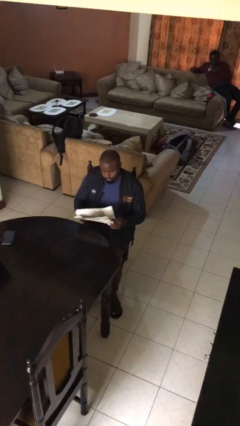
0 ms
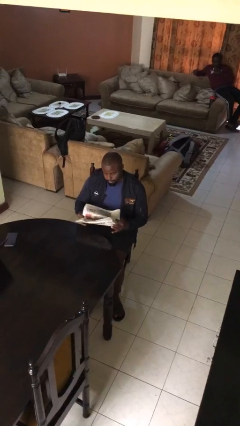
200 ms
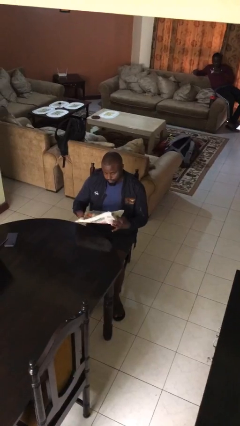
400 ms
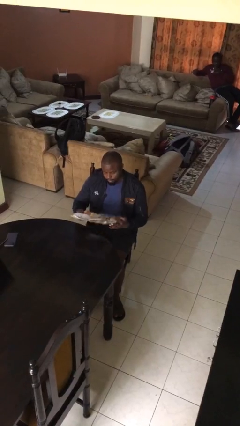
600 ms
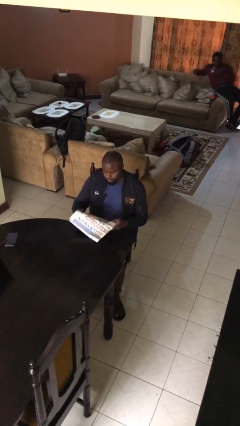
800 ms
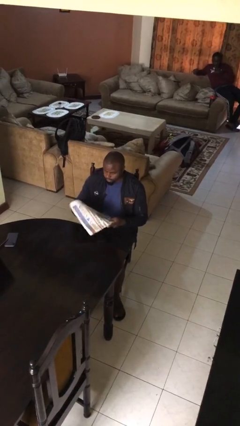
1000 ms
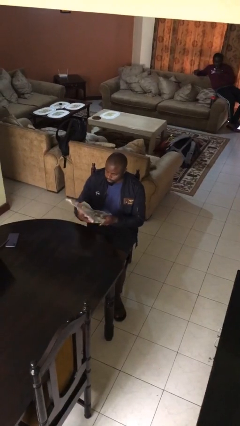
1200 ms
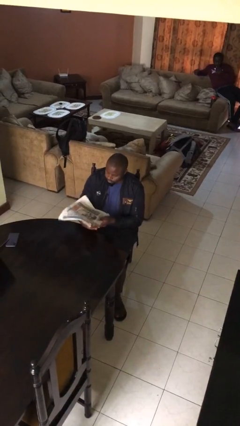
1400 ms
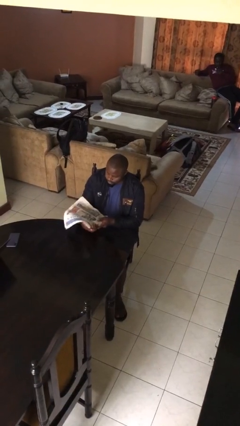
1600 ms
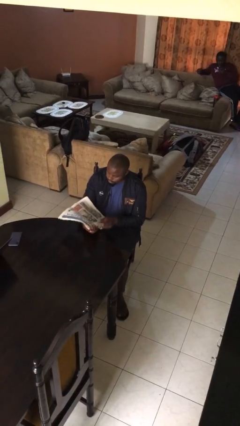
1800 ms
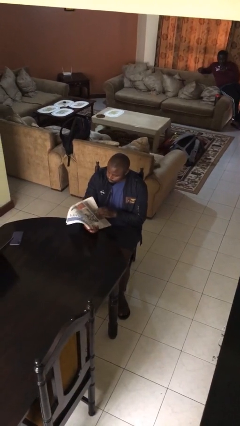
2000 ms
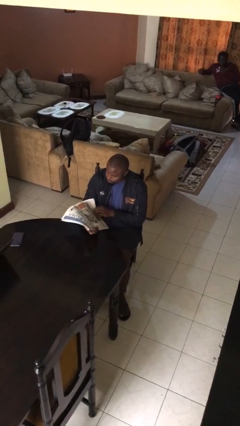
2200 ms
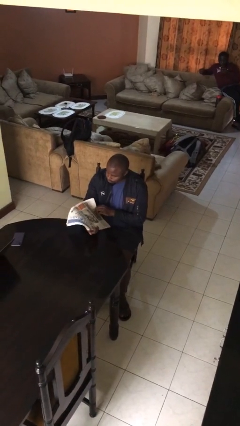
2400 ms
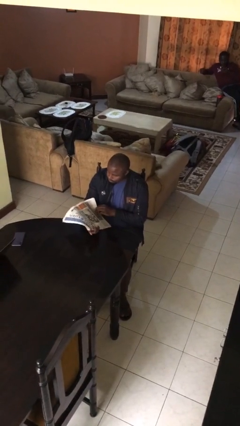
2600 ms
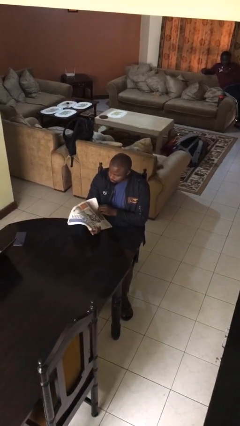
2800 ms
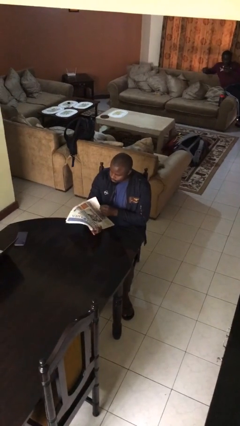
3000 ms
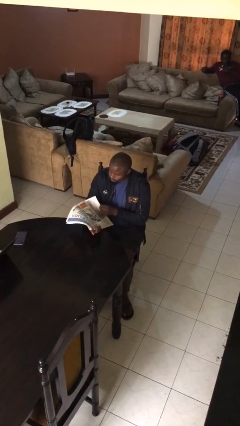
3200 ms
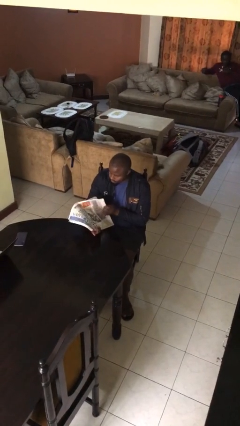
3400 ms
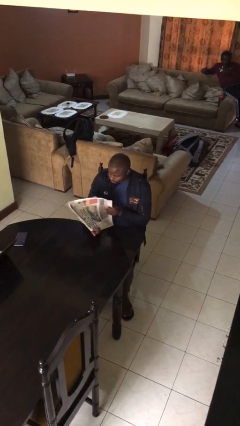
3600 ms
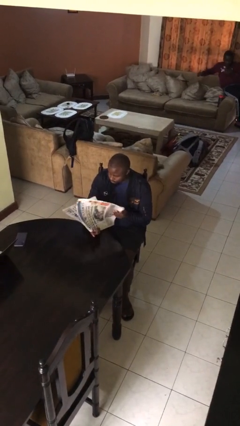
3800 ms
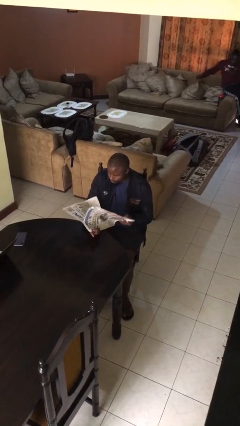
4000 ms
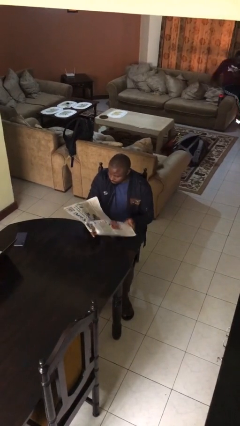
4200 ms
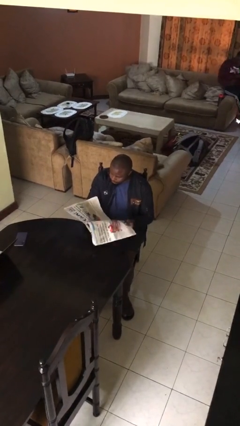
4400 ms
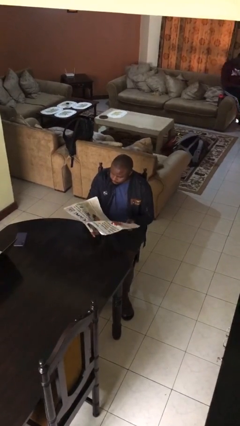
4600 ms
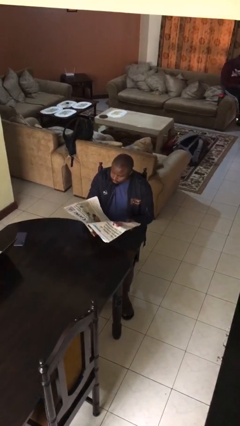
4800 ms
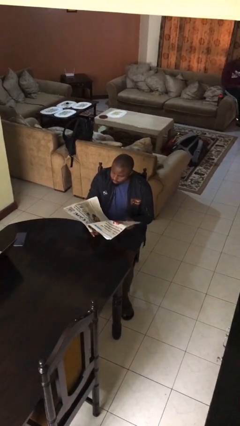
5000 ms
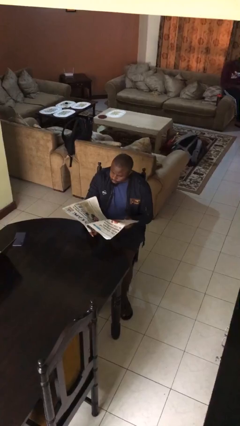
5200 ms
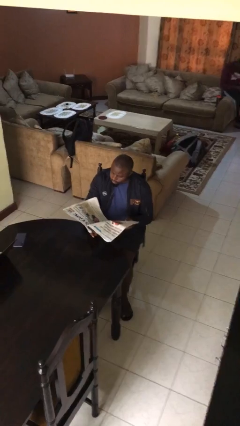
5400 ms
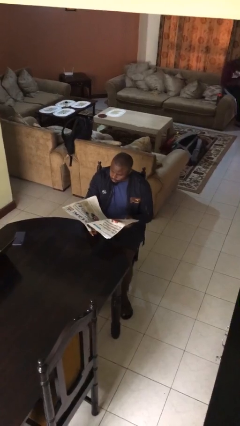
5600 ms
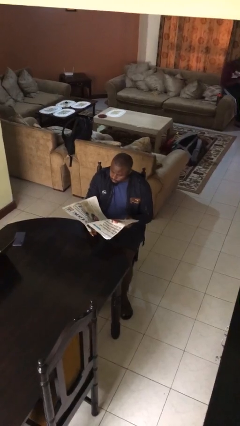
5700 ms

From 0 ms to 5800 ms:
person reads document

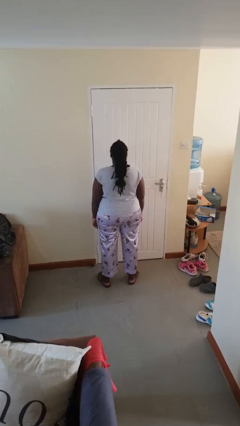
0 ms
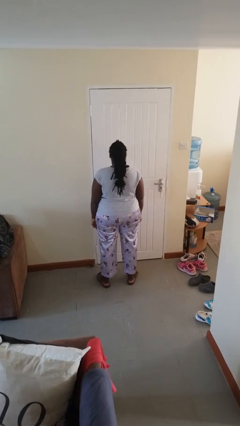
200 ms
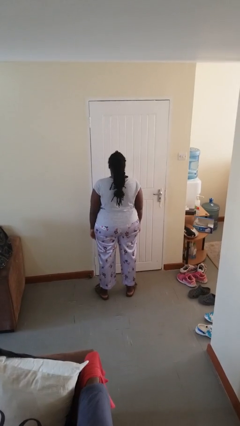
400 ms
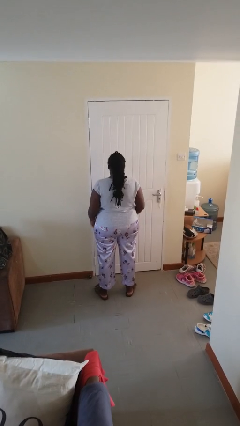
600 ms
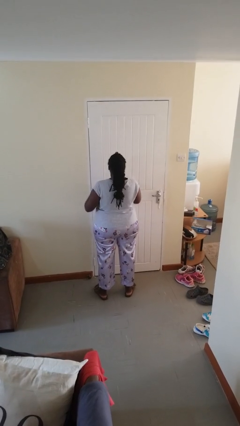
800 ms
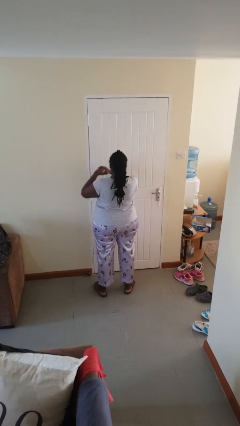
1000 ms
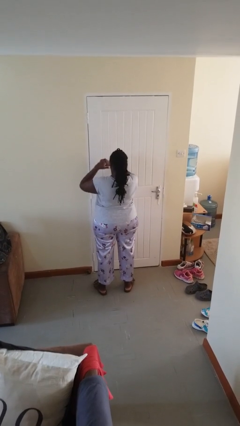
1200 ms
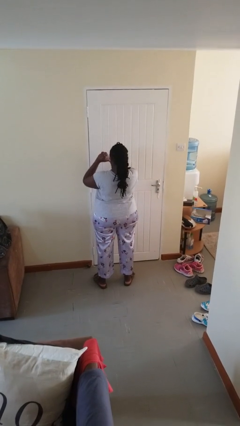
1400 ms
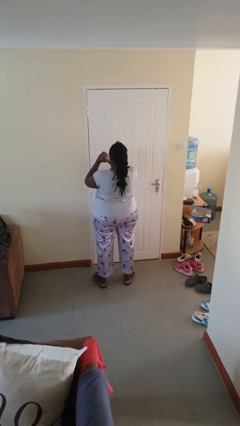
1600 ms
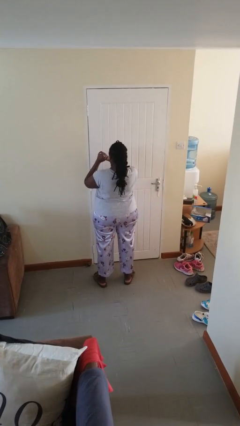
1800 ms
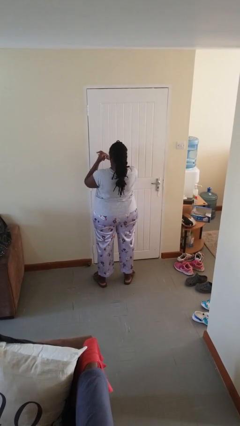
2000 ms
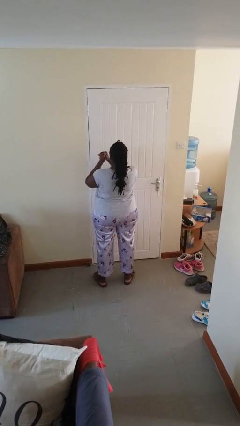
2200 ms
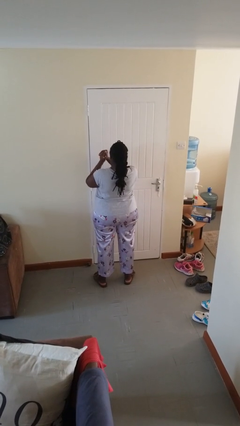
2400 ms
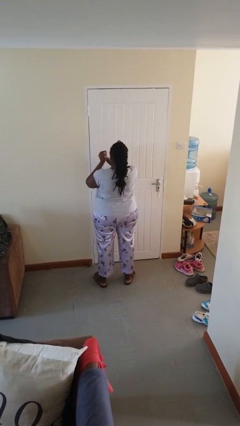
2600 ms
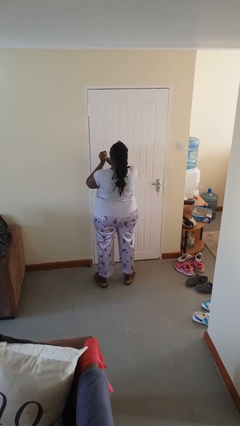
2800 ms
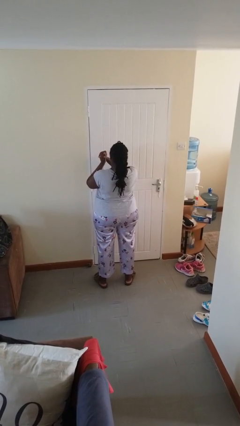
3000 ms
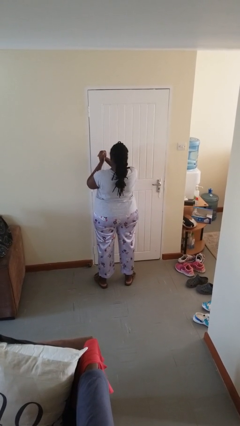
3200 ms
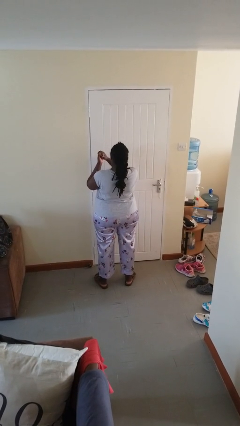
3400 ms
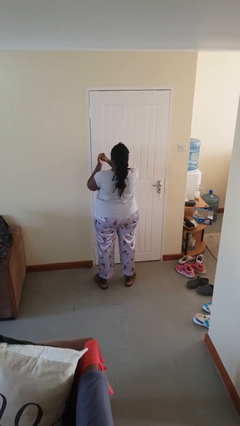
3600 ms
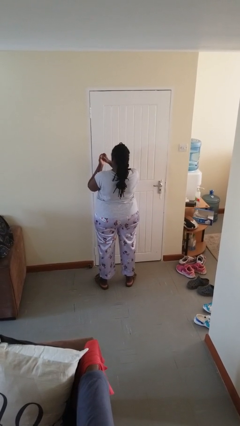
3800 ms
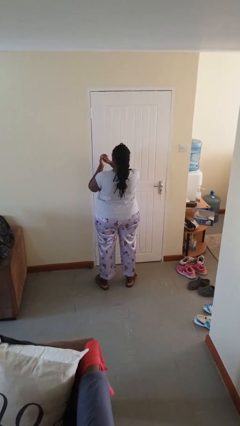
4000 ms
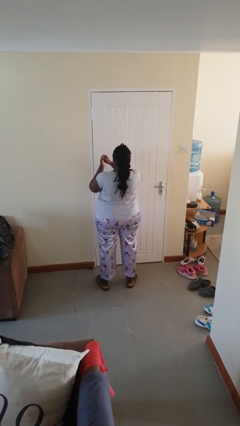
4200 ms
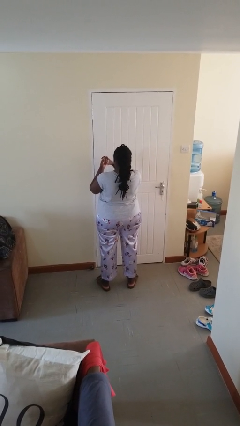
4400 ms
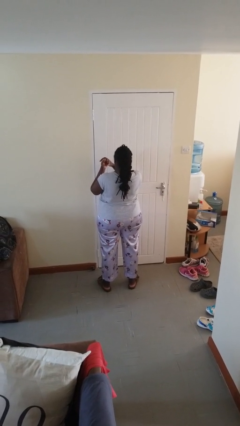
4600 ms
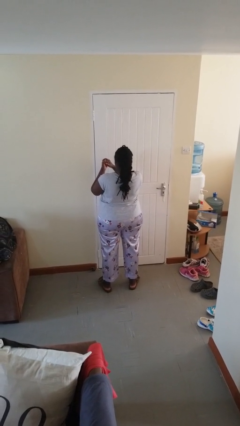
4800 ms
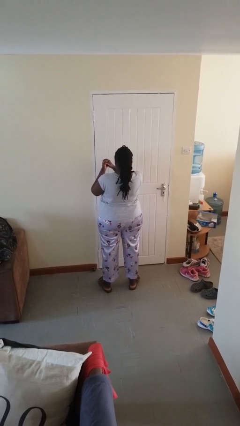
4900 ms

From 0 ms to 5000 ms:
person cracks knuckles

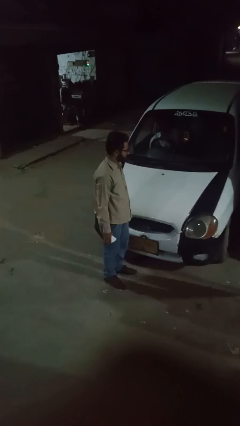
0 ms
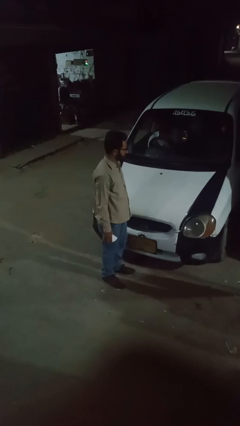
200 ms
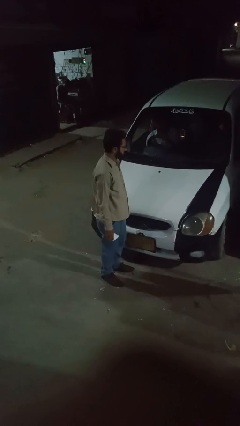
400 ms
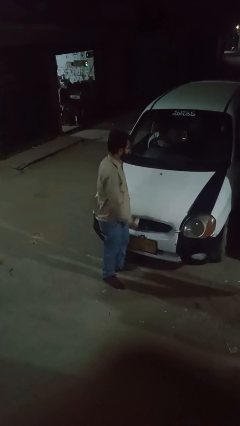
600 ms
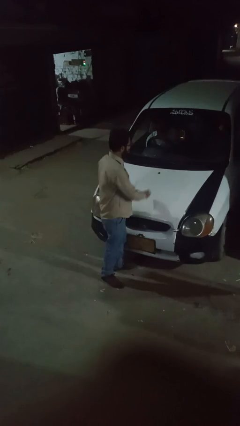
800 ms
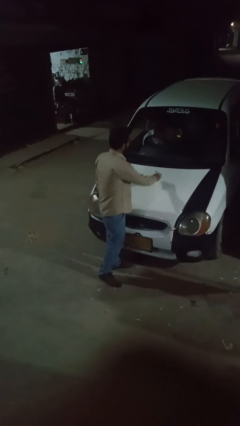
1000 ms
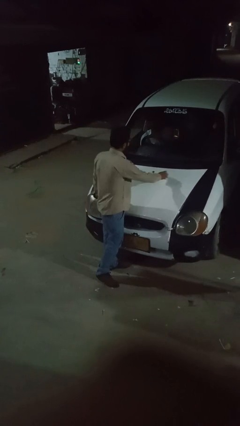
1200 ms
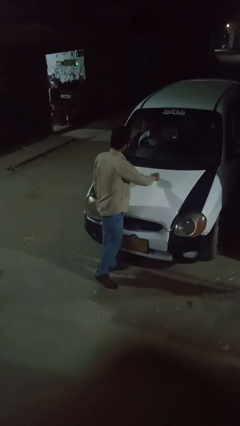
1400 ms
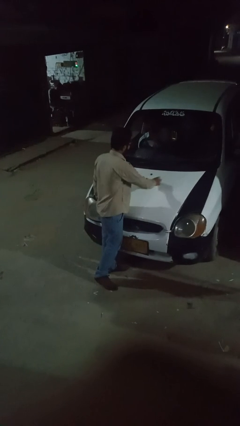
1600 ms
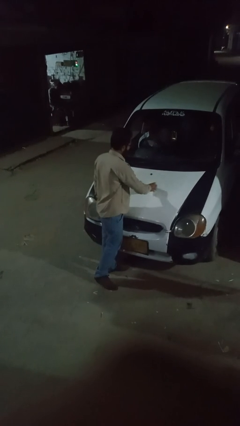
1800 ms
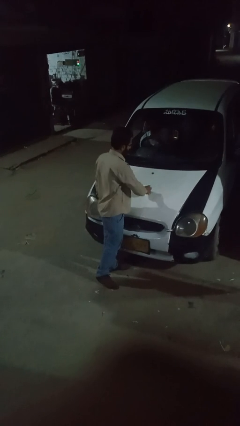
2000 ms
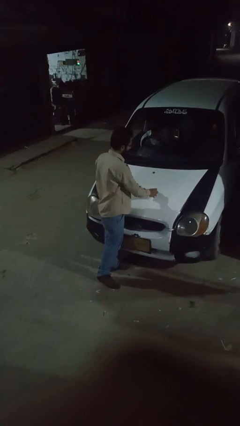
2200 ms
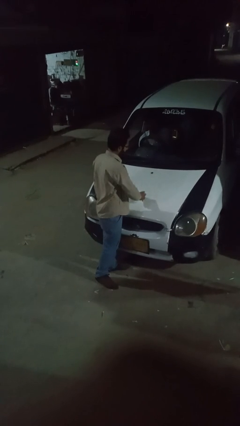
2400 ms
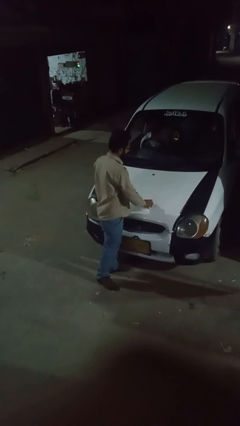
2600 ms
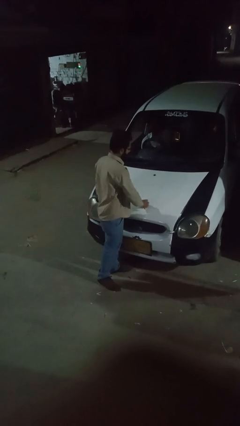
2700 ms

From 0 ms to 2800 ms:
person polishes car with rag

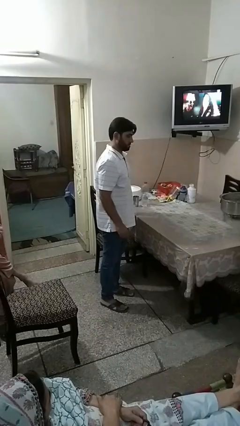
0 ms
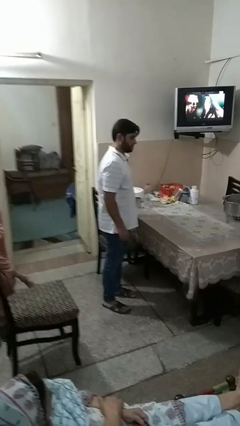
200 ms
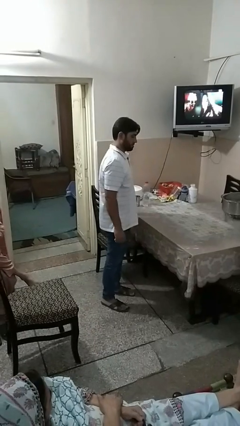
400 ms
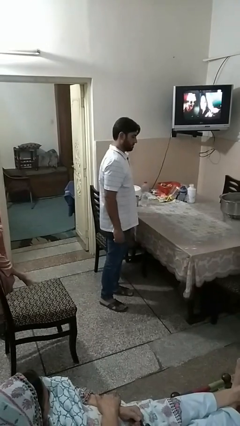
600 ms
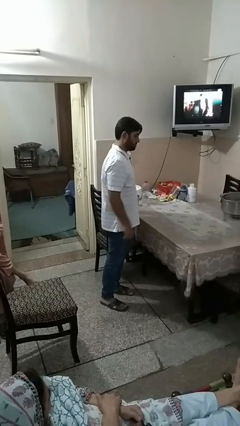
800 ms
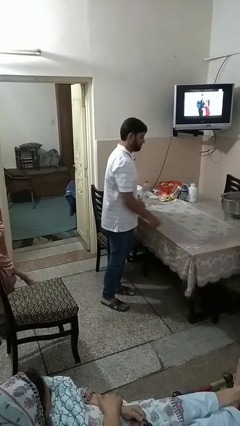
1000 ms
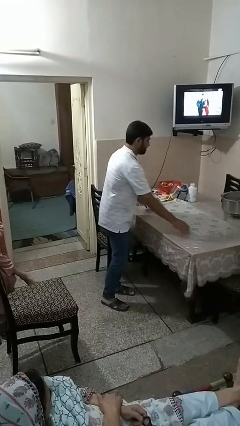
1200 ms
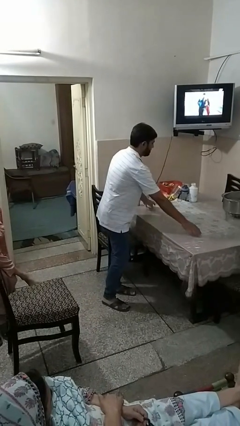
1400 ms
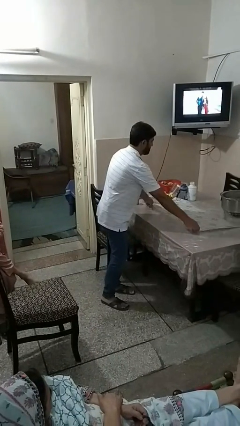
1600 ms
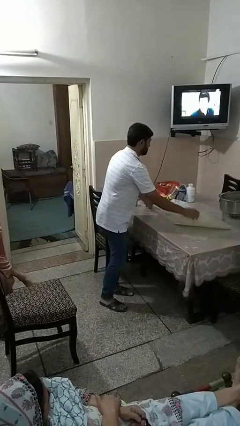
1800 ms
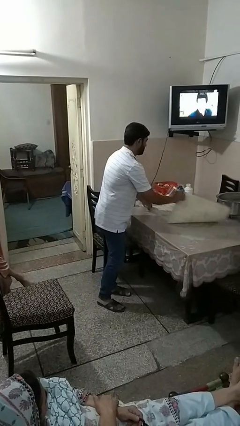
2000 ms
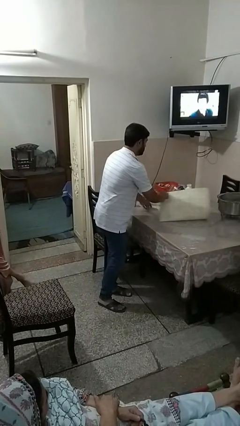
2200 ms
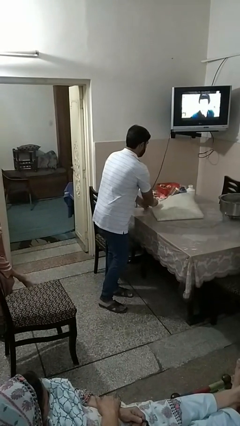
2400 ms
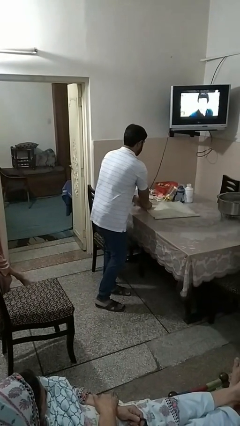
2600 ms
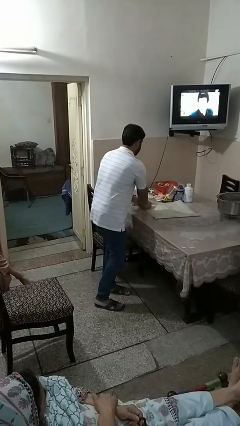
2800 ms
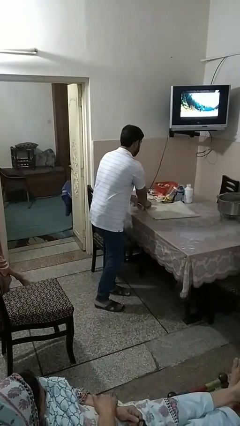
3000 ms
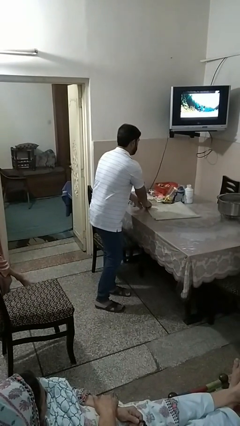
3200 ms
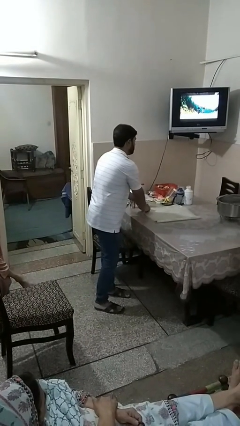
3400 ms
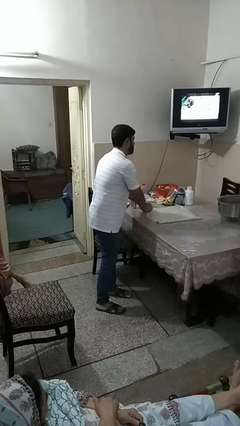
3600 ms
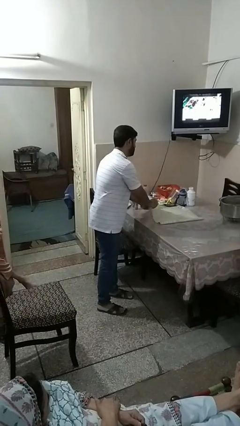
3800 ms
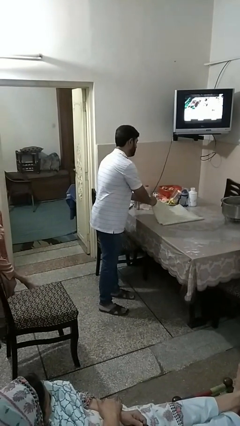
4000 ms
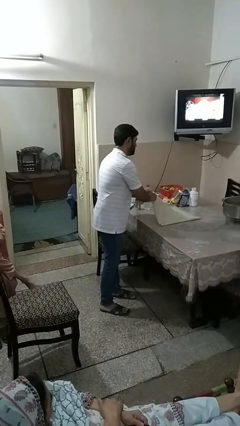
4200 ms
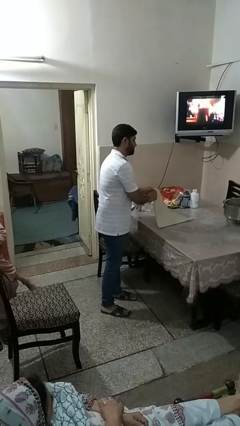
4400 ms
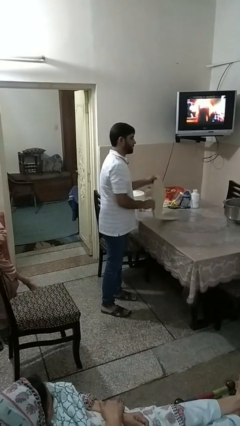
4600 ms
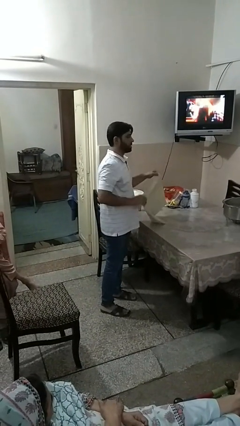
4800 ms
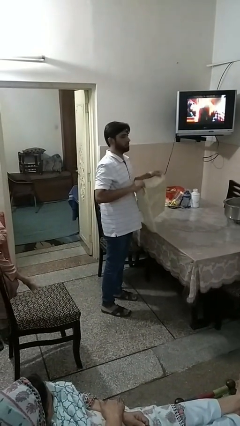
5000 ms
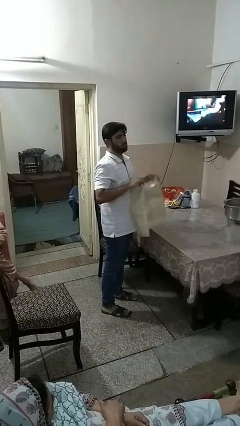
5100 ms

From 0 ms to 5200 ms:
person folds tablecloth
